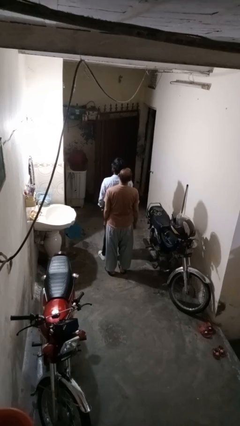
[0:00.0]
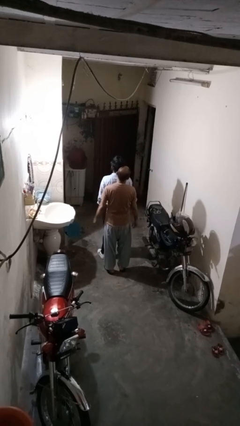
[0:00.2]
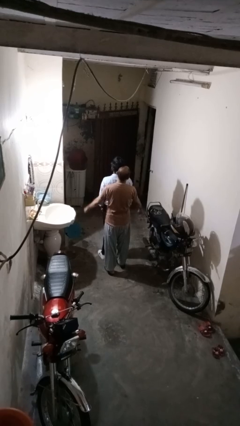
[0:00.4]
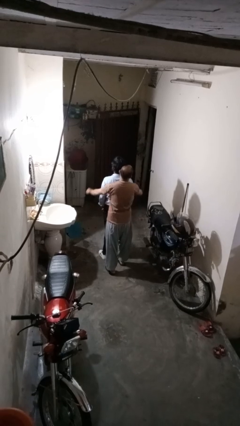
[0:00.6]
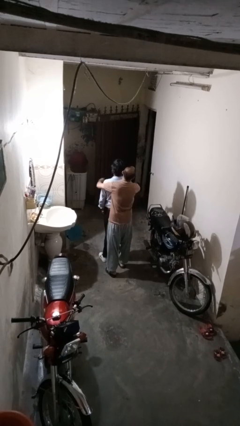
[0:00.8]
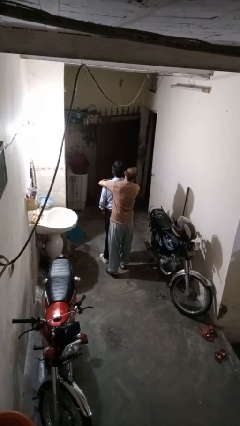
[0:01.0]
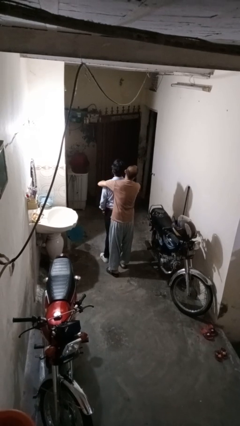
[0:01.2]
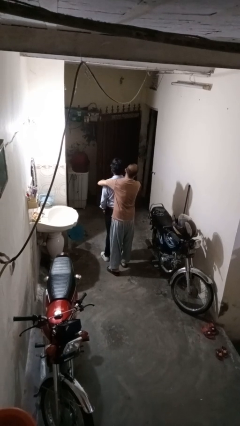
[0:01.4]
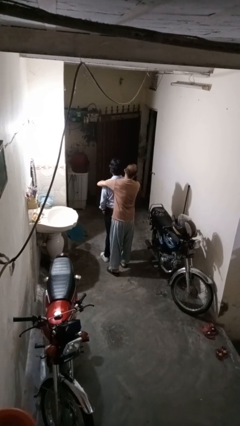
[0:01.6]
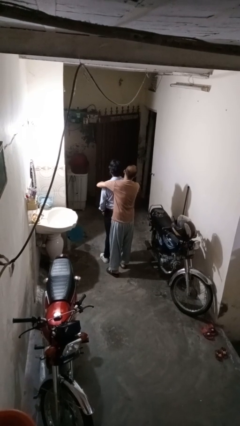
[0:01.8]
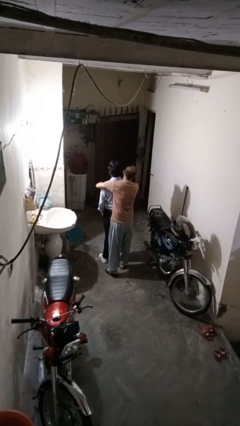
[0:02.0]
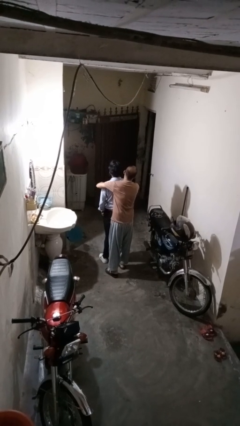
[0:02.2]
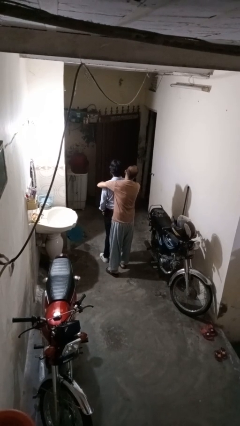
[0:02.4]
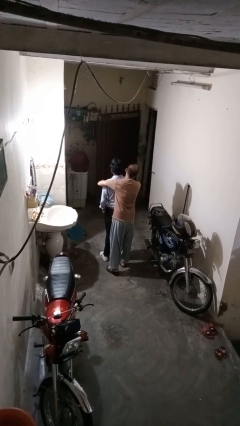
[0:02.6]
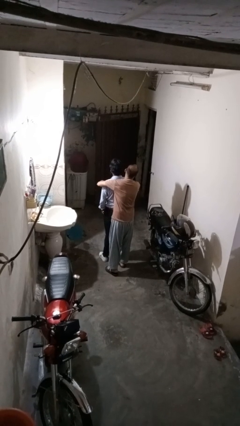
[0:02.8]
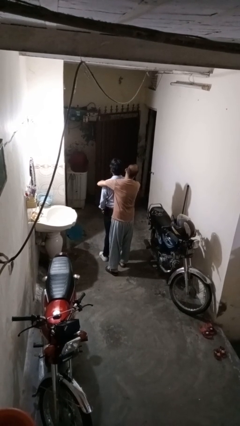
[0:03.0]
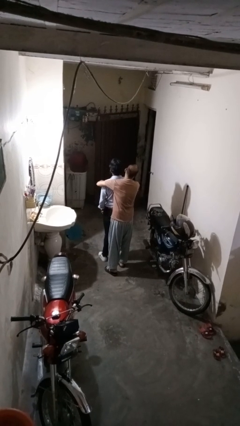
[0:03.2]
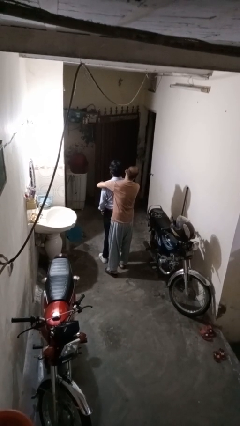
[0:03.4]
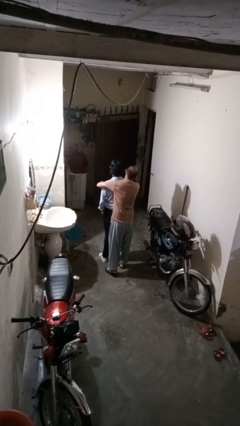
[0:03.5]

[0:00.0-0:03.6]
person hugs person from behind

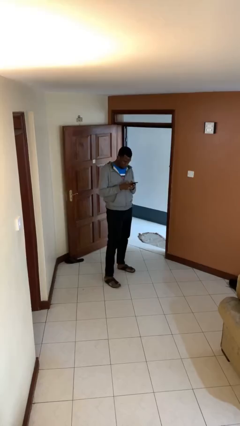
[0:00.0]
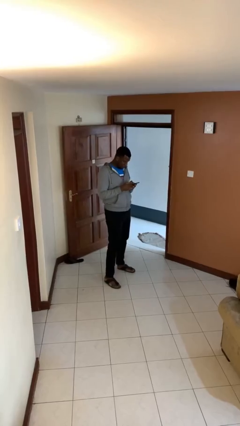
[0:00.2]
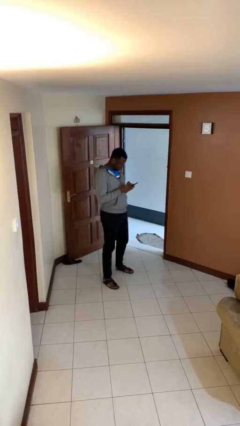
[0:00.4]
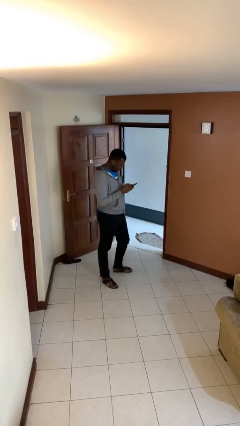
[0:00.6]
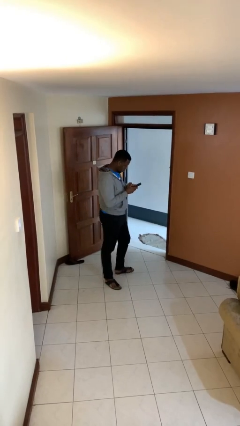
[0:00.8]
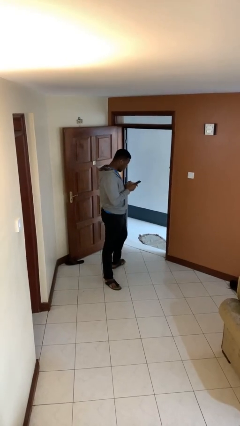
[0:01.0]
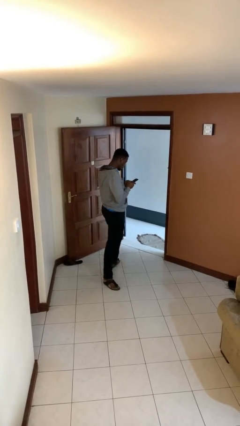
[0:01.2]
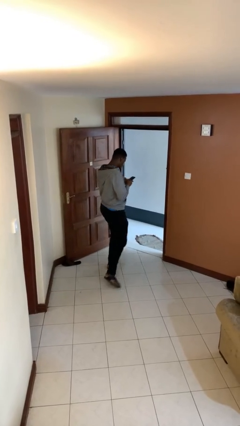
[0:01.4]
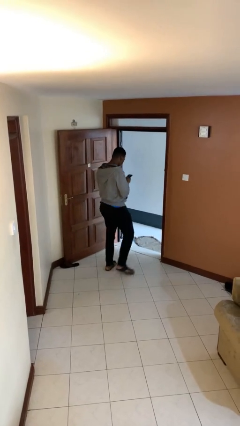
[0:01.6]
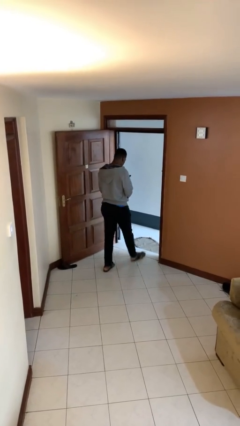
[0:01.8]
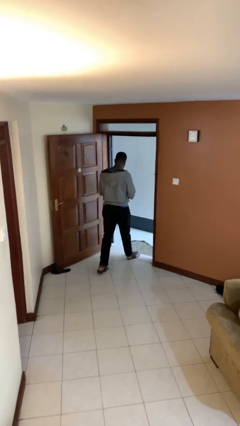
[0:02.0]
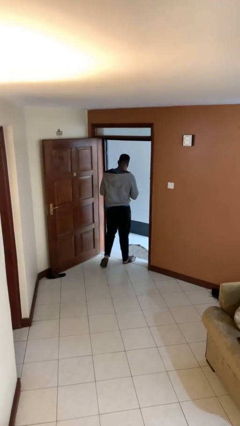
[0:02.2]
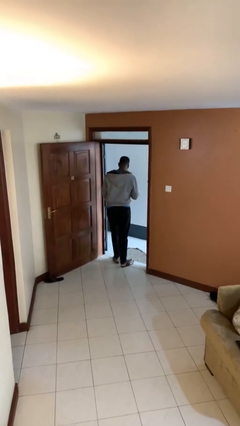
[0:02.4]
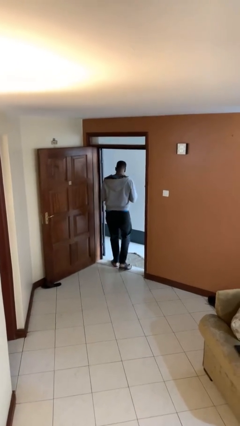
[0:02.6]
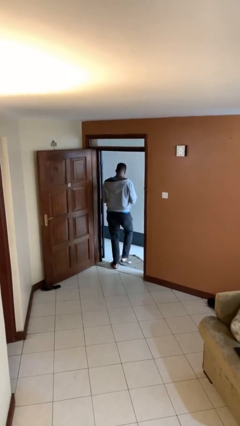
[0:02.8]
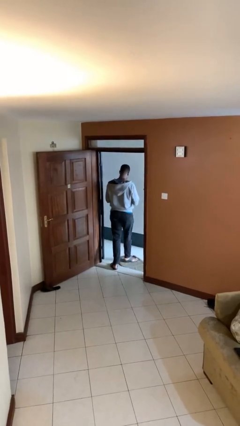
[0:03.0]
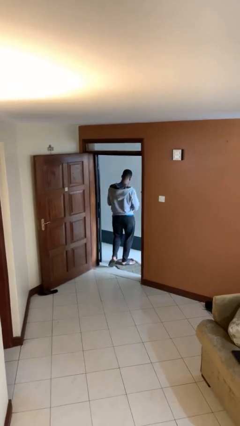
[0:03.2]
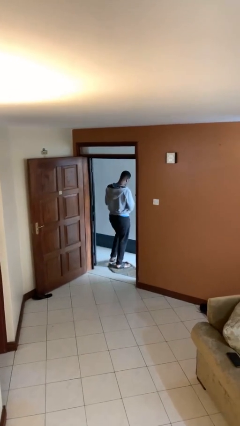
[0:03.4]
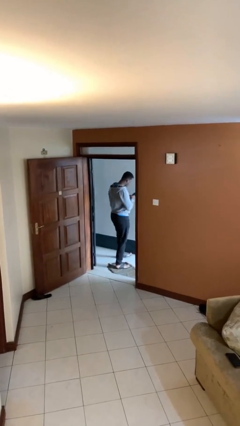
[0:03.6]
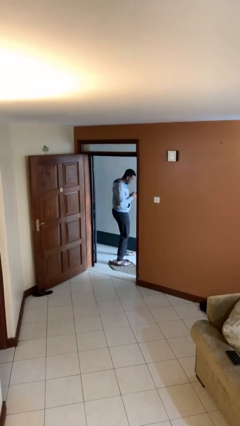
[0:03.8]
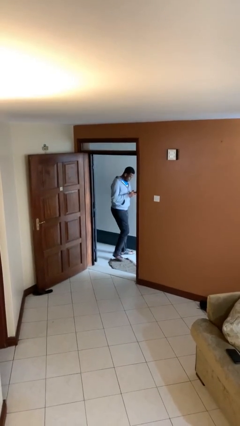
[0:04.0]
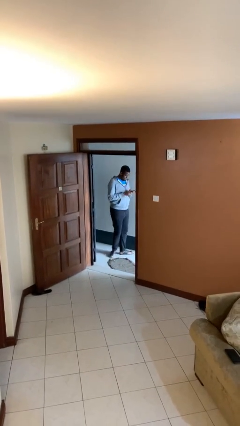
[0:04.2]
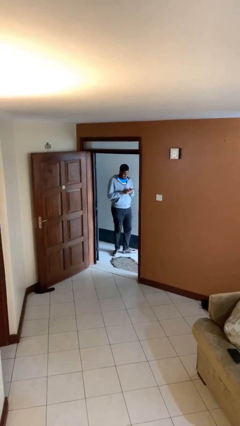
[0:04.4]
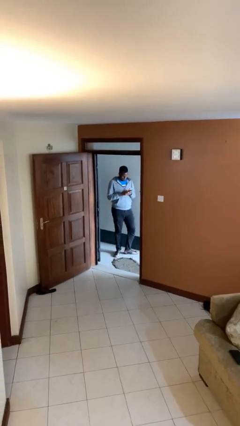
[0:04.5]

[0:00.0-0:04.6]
person exits scene through structure

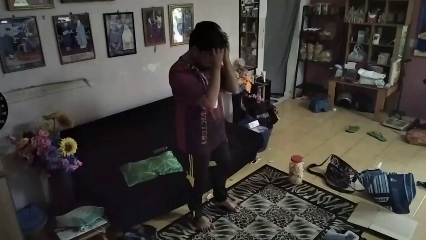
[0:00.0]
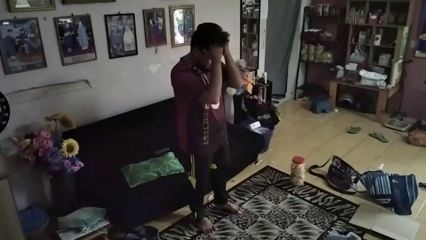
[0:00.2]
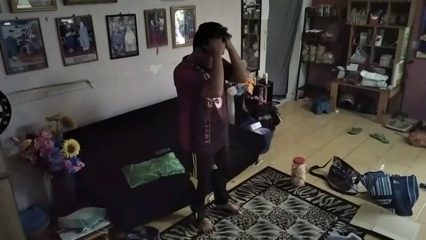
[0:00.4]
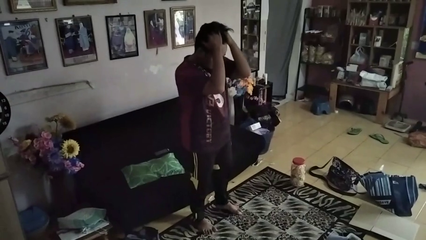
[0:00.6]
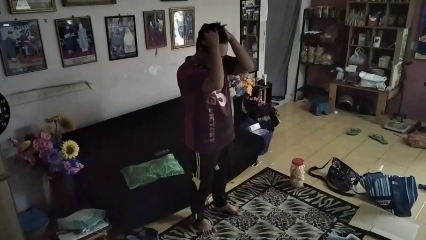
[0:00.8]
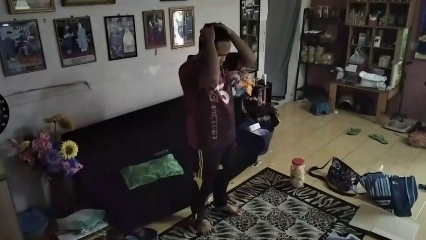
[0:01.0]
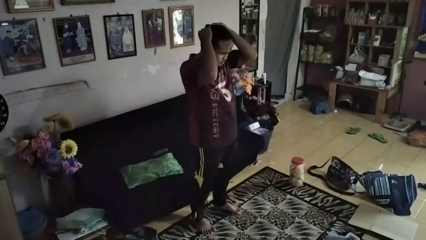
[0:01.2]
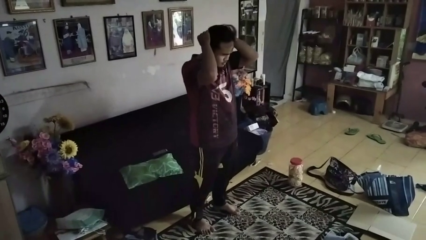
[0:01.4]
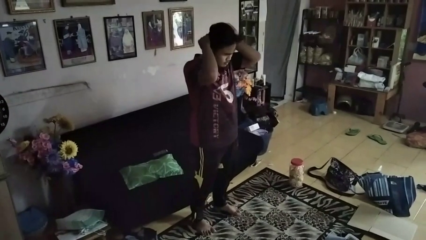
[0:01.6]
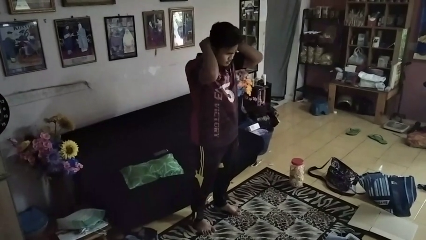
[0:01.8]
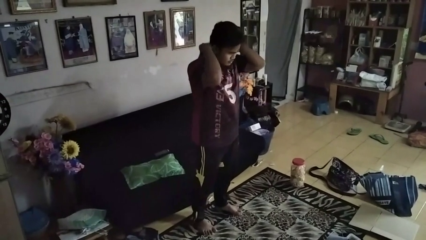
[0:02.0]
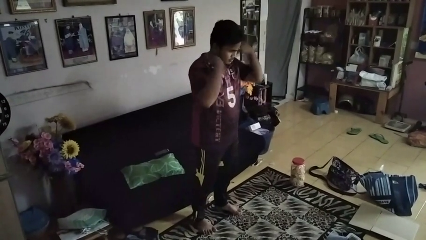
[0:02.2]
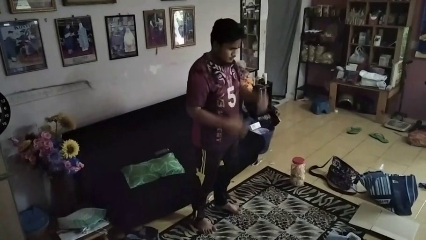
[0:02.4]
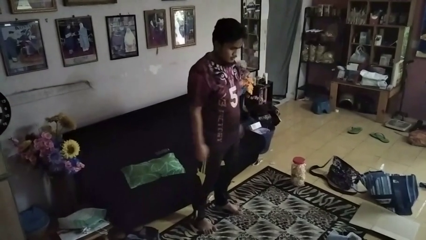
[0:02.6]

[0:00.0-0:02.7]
person strokes hair

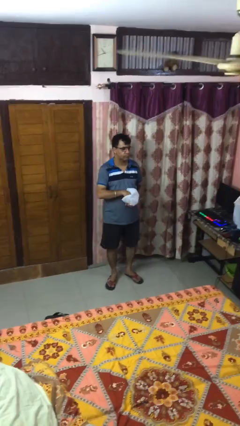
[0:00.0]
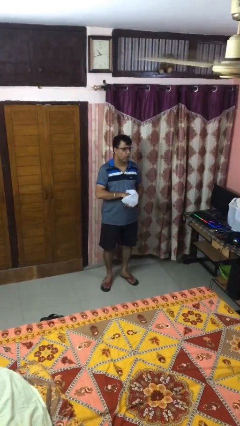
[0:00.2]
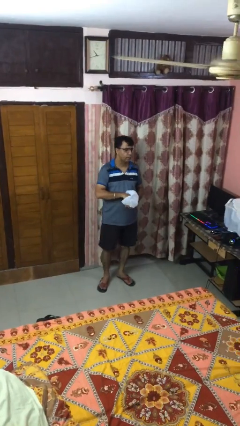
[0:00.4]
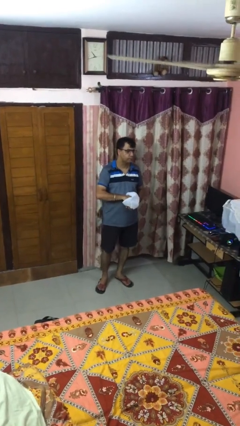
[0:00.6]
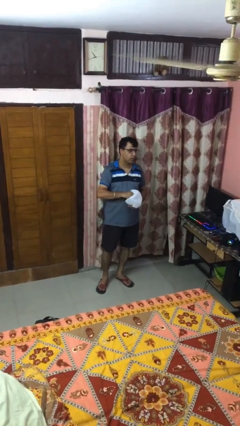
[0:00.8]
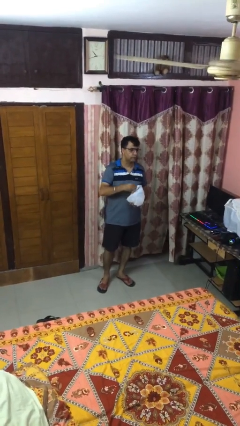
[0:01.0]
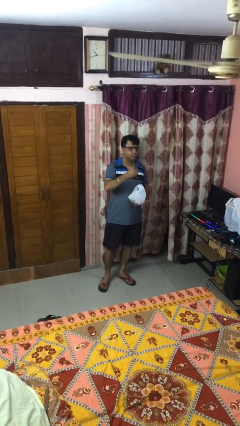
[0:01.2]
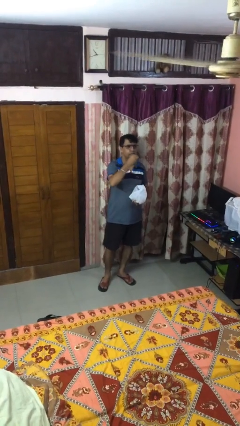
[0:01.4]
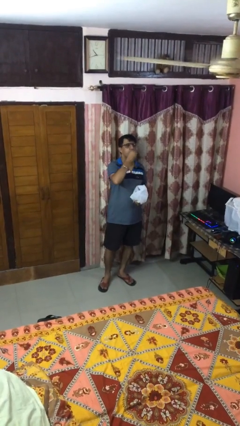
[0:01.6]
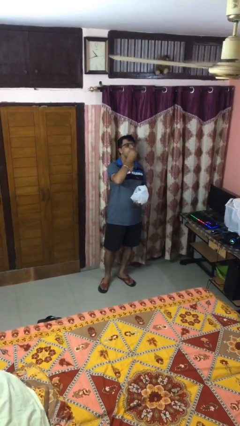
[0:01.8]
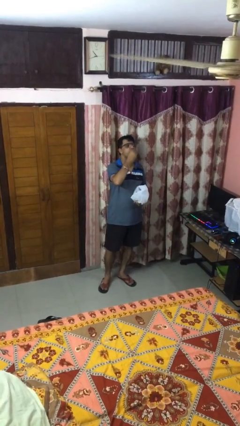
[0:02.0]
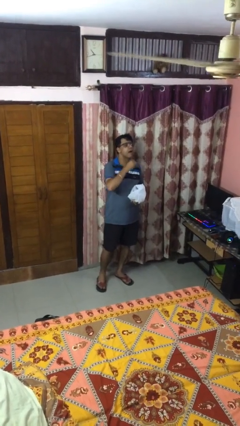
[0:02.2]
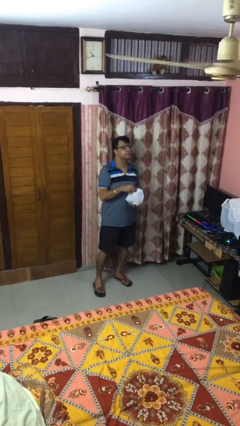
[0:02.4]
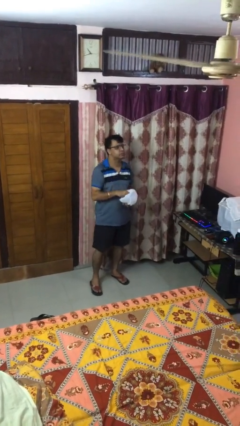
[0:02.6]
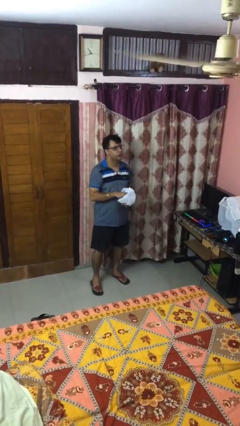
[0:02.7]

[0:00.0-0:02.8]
person eats snack from bag

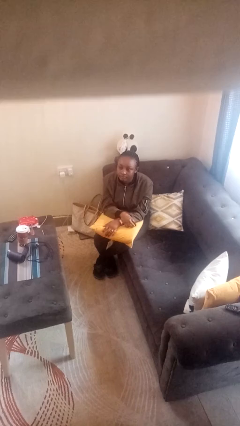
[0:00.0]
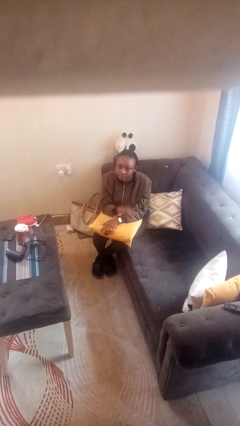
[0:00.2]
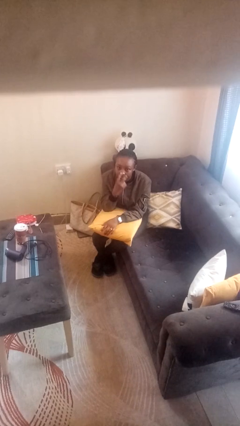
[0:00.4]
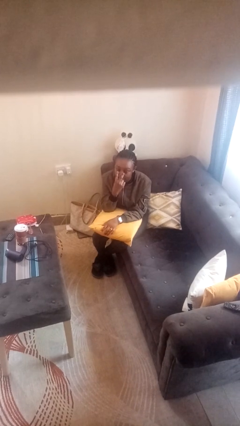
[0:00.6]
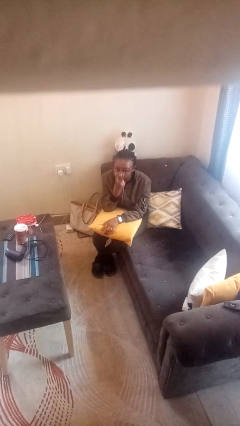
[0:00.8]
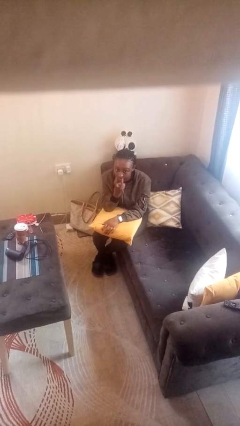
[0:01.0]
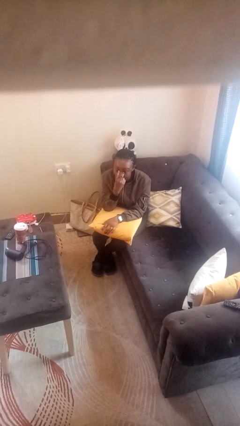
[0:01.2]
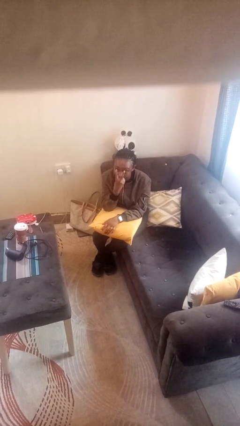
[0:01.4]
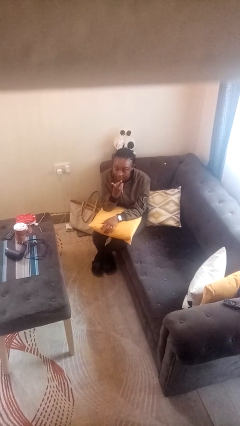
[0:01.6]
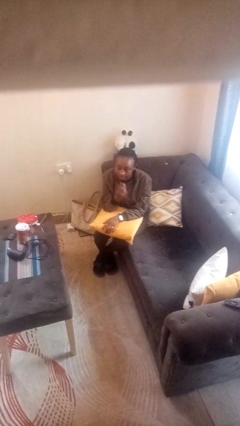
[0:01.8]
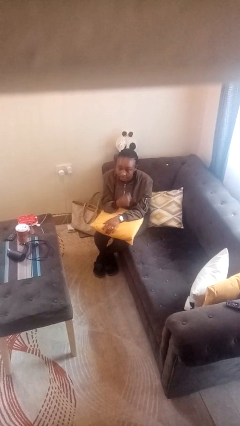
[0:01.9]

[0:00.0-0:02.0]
person gestures watch closely

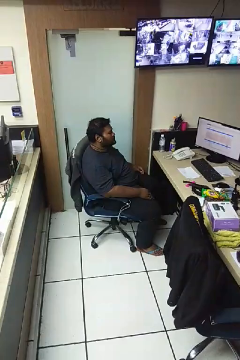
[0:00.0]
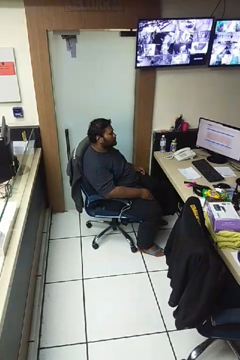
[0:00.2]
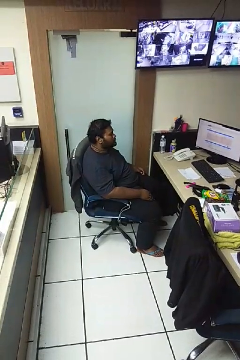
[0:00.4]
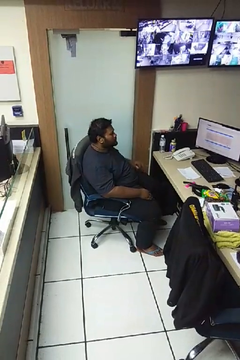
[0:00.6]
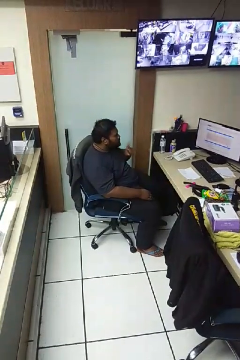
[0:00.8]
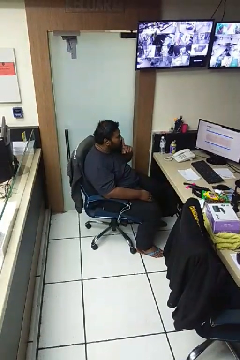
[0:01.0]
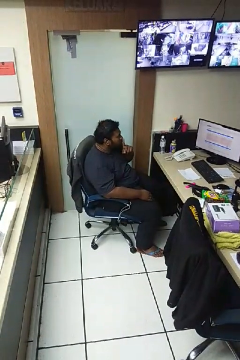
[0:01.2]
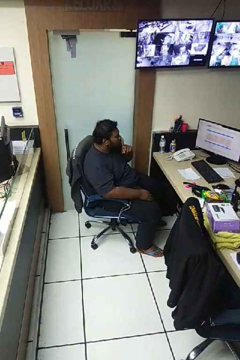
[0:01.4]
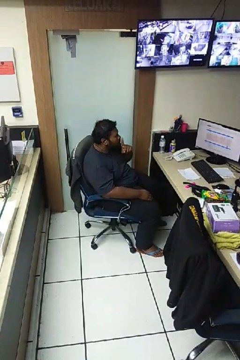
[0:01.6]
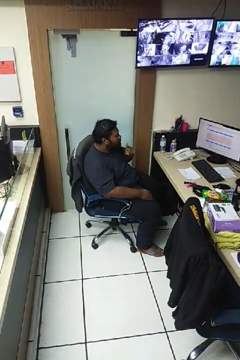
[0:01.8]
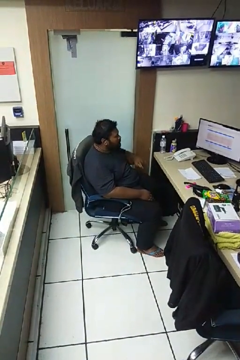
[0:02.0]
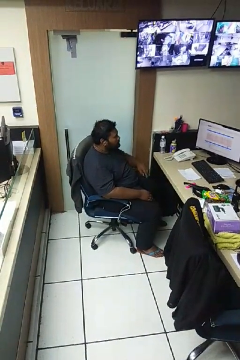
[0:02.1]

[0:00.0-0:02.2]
person gestures be quiet
